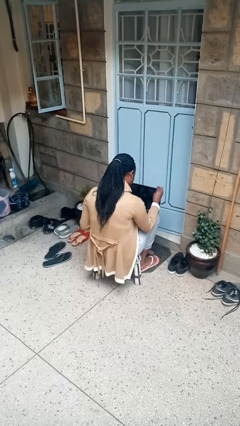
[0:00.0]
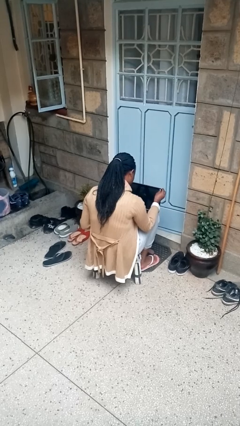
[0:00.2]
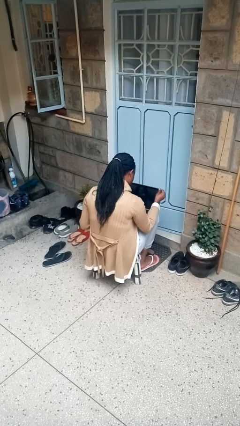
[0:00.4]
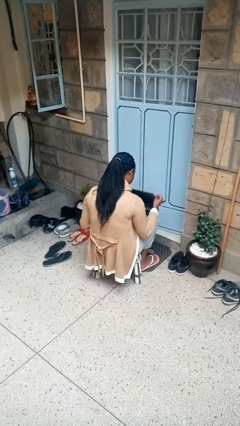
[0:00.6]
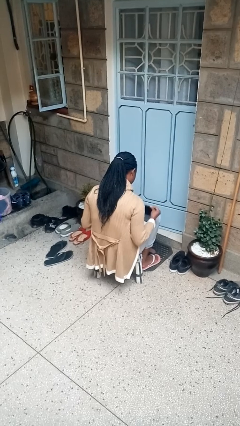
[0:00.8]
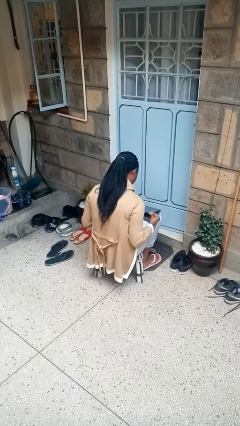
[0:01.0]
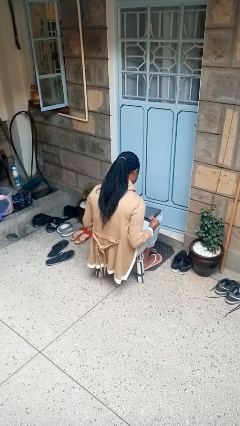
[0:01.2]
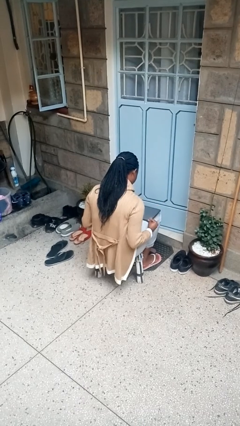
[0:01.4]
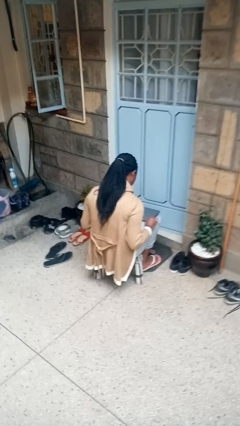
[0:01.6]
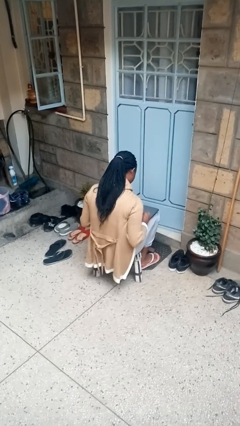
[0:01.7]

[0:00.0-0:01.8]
person closes laptop

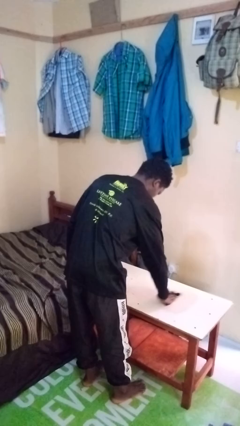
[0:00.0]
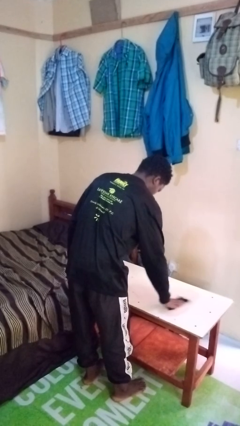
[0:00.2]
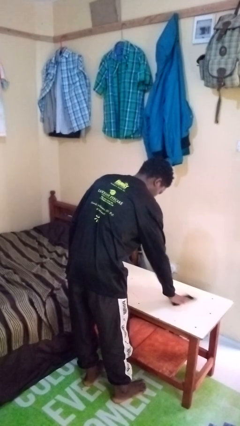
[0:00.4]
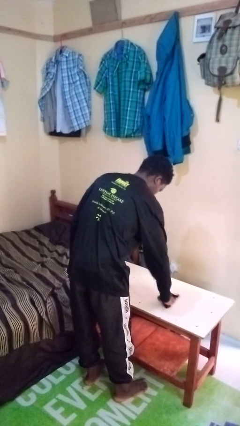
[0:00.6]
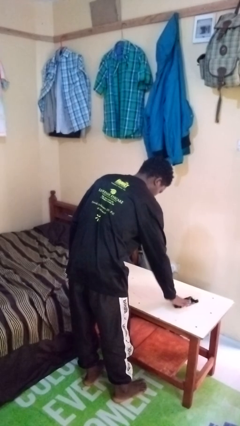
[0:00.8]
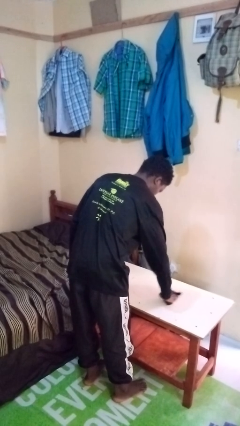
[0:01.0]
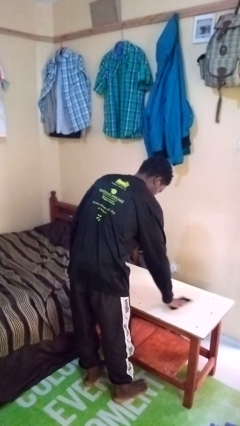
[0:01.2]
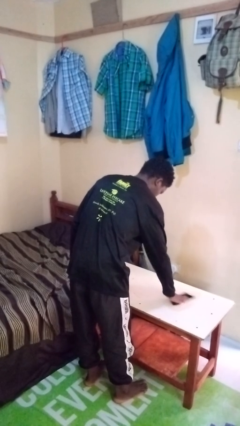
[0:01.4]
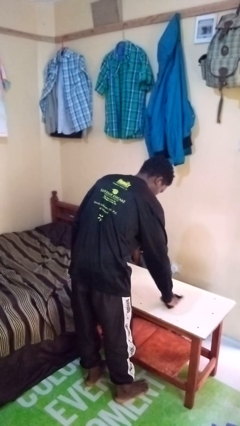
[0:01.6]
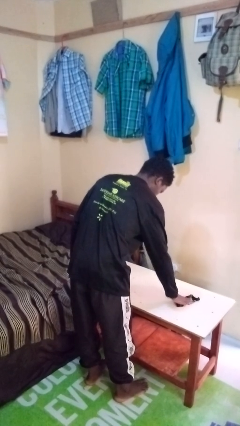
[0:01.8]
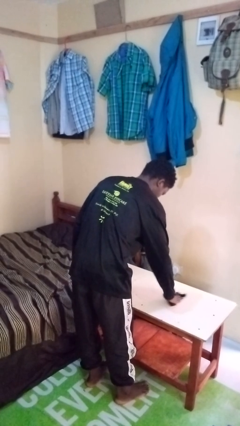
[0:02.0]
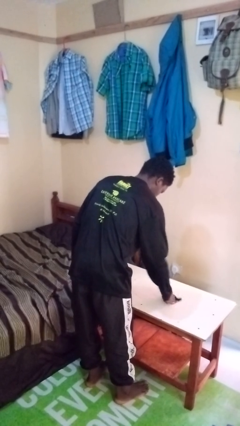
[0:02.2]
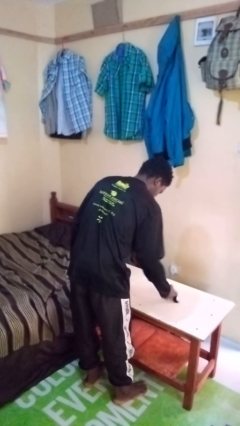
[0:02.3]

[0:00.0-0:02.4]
person cleans table with rag

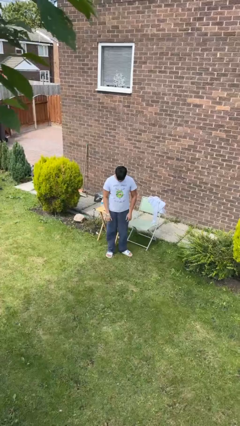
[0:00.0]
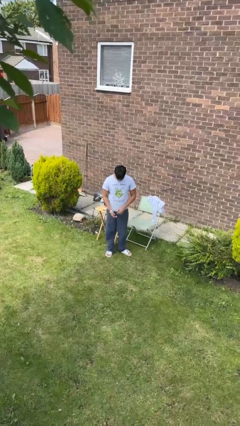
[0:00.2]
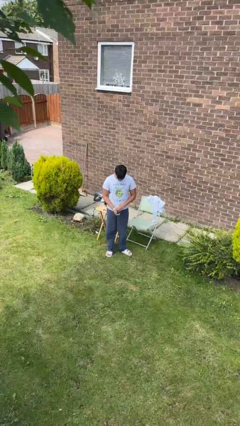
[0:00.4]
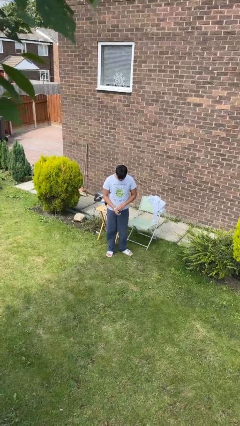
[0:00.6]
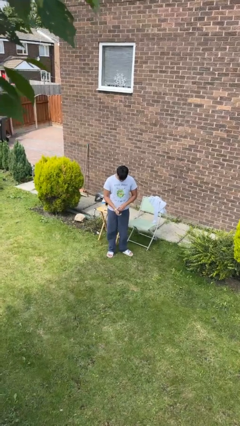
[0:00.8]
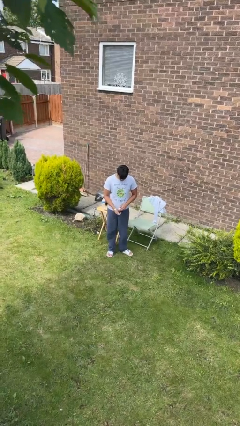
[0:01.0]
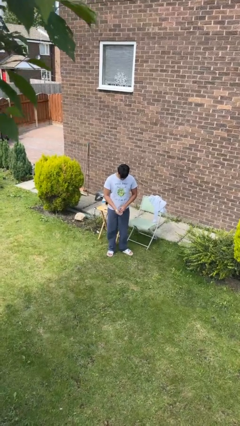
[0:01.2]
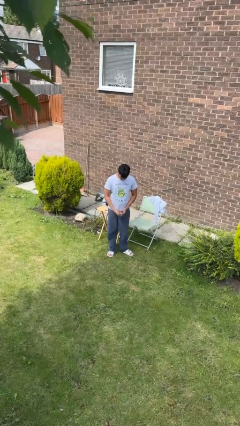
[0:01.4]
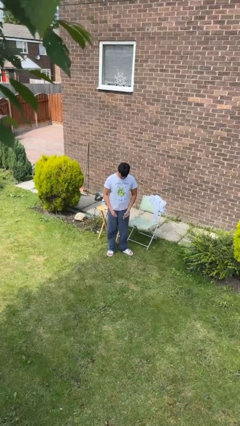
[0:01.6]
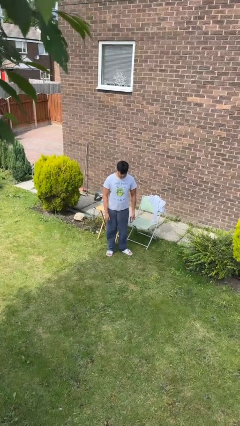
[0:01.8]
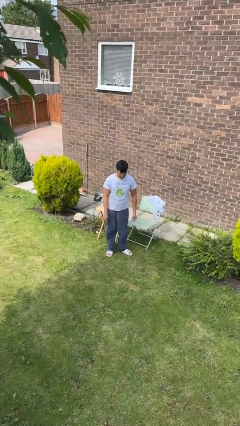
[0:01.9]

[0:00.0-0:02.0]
person takes off wristwatch

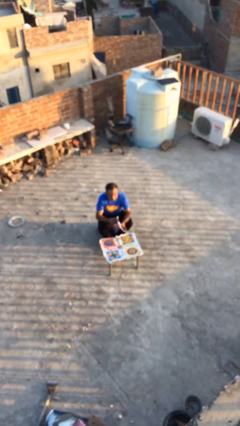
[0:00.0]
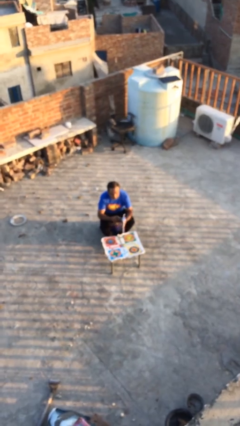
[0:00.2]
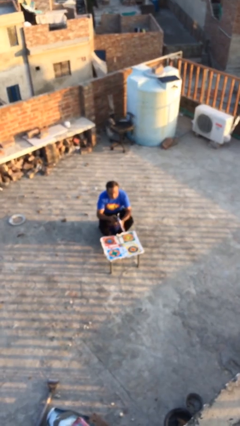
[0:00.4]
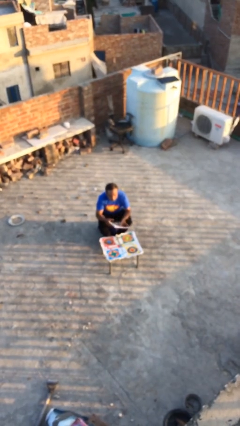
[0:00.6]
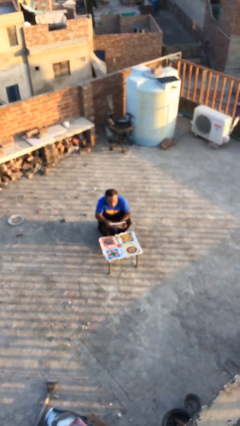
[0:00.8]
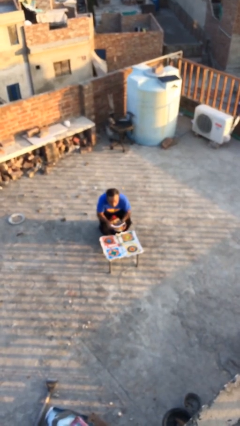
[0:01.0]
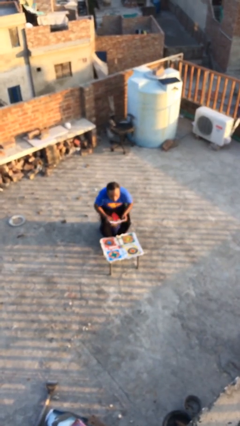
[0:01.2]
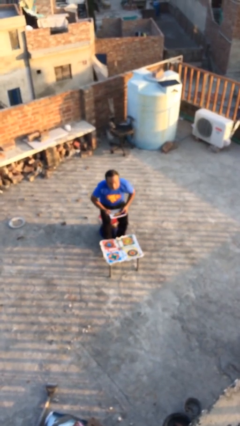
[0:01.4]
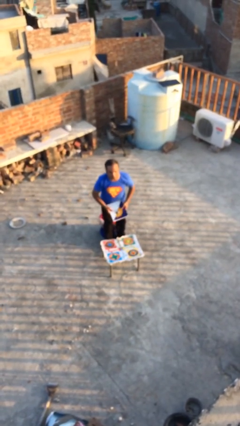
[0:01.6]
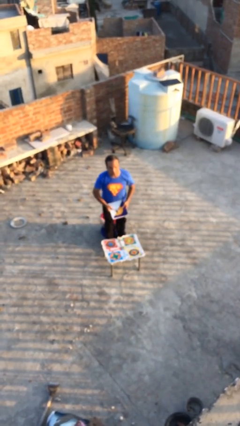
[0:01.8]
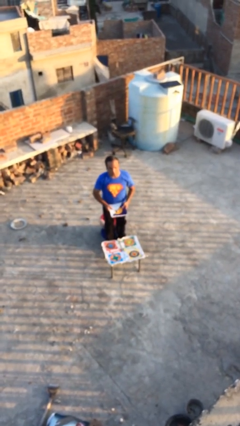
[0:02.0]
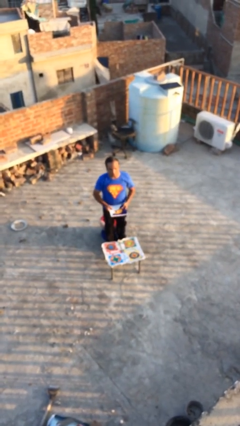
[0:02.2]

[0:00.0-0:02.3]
person stands up

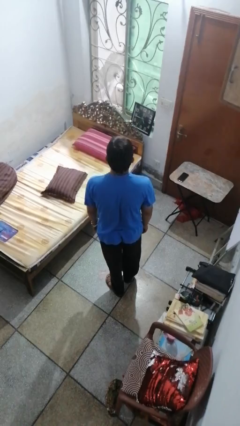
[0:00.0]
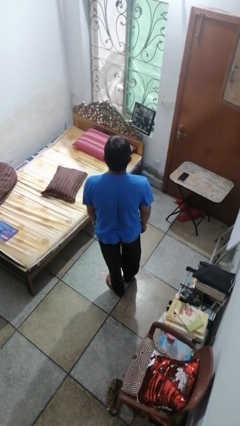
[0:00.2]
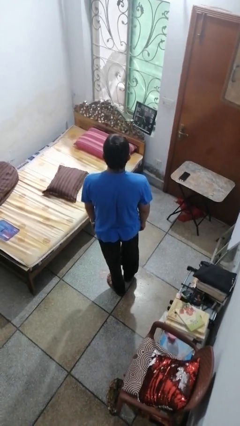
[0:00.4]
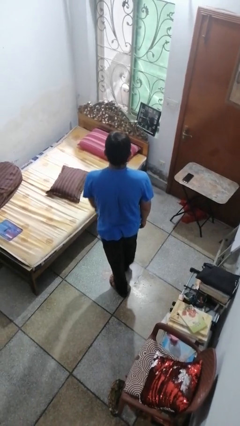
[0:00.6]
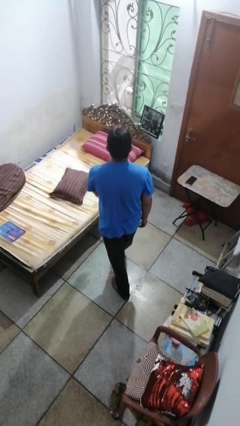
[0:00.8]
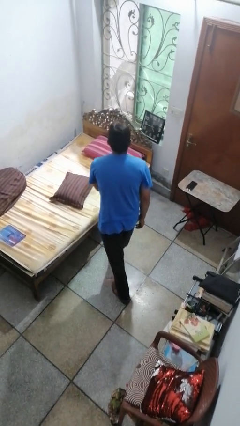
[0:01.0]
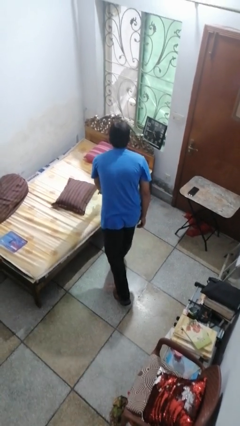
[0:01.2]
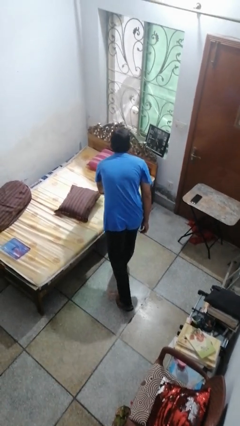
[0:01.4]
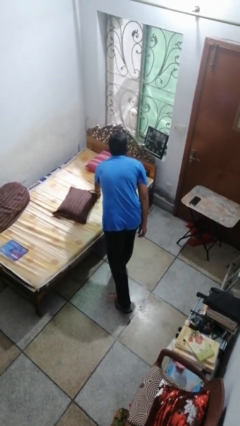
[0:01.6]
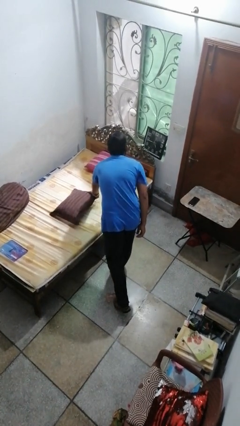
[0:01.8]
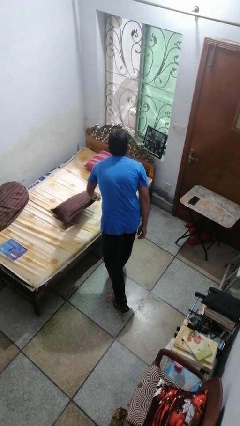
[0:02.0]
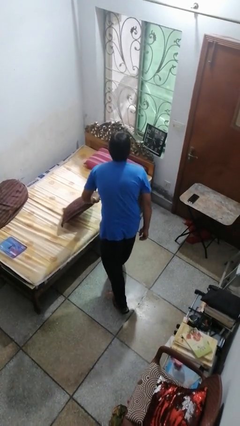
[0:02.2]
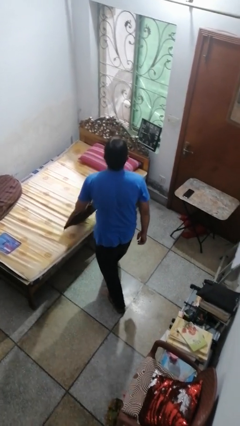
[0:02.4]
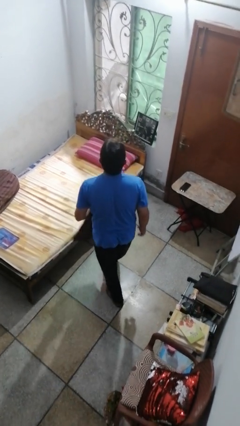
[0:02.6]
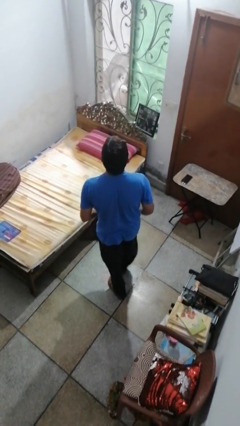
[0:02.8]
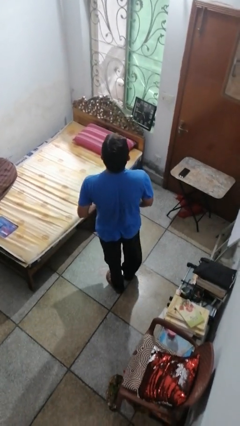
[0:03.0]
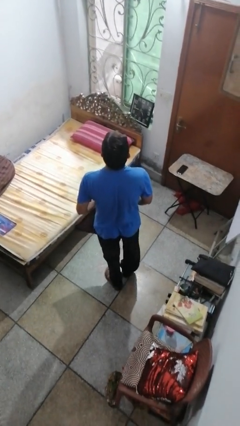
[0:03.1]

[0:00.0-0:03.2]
person picks up object from bed

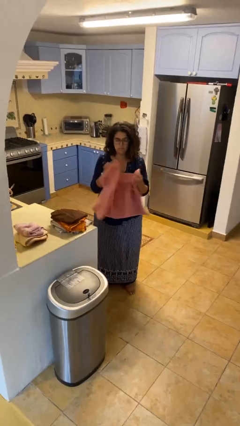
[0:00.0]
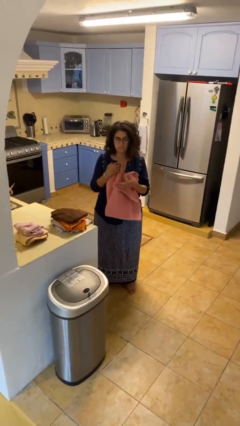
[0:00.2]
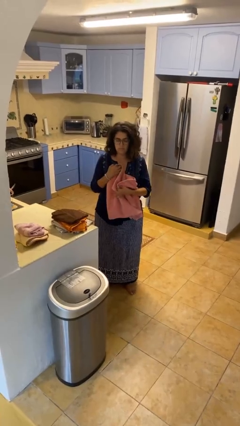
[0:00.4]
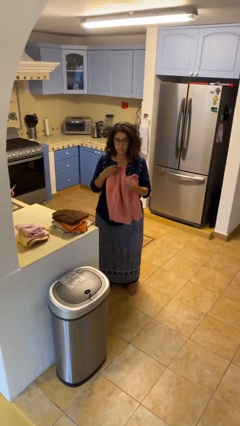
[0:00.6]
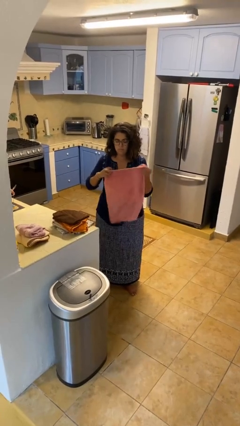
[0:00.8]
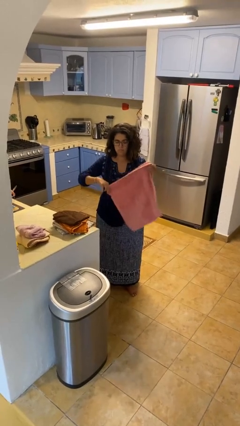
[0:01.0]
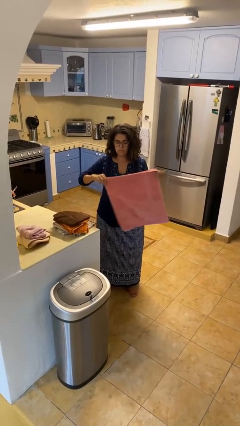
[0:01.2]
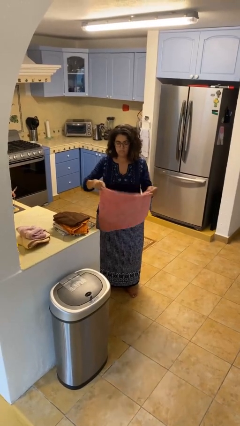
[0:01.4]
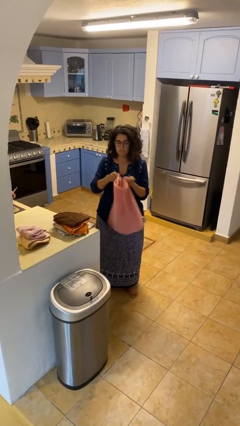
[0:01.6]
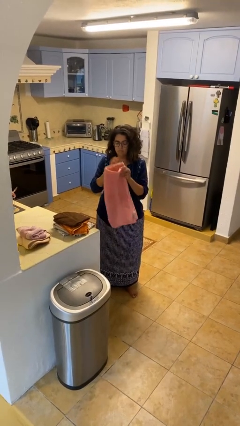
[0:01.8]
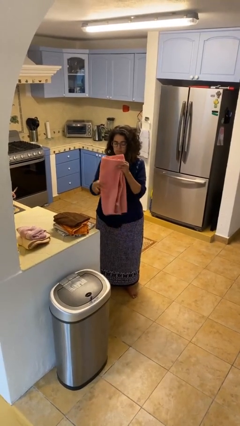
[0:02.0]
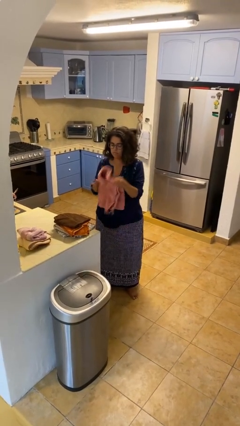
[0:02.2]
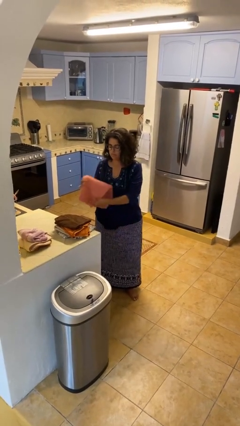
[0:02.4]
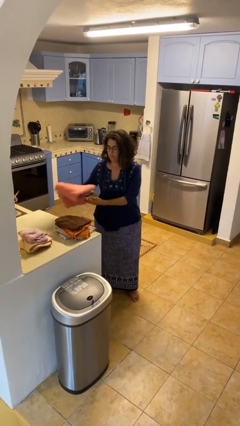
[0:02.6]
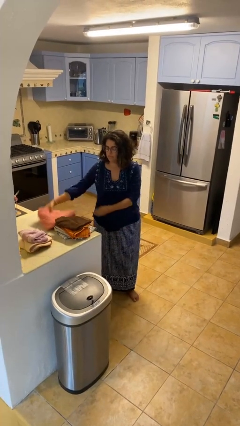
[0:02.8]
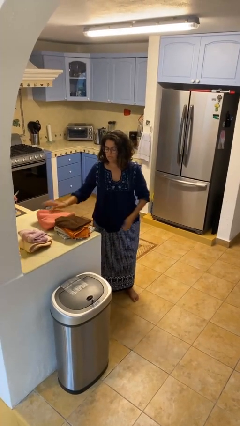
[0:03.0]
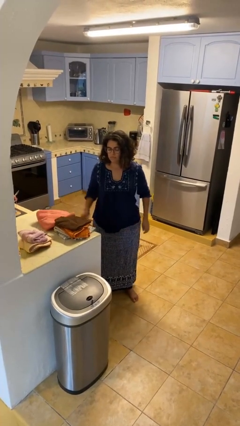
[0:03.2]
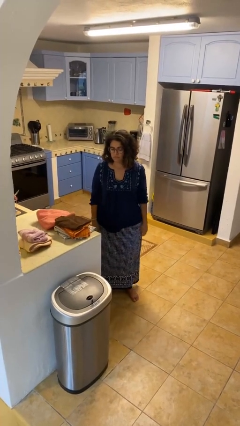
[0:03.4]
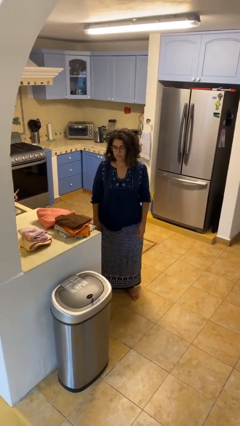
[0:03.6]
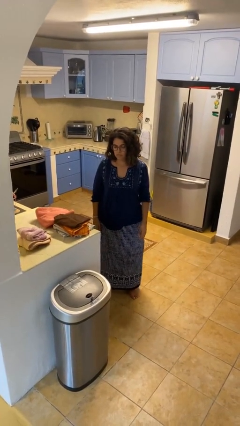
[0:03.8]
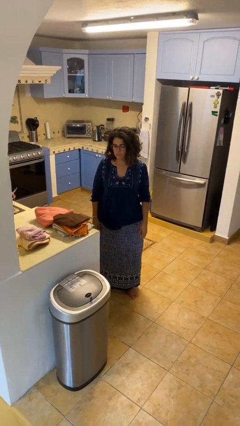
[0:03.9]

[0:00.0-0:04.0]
person folds towel

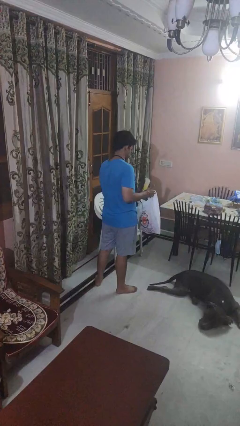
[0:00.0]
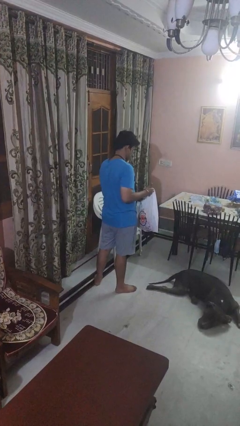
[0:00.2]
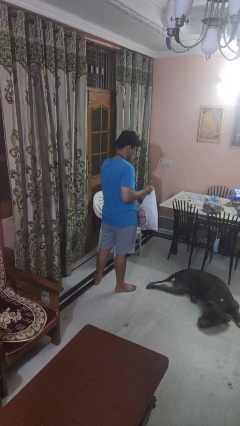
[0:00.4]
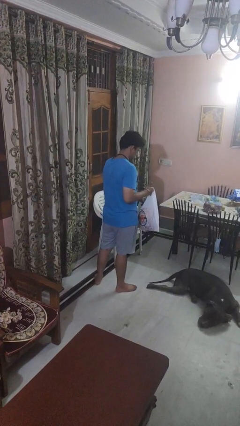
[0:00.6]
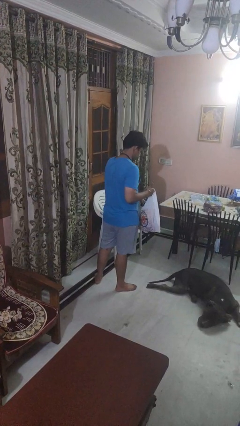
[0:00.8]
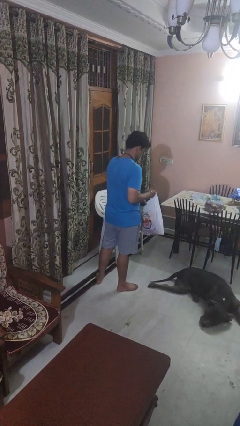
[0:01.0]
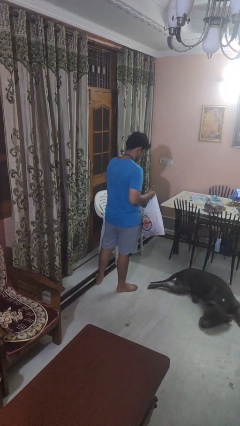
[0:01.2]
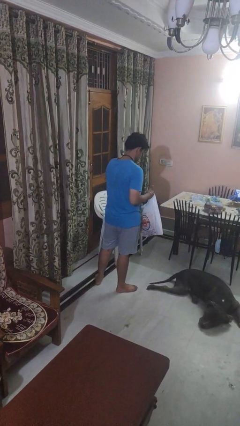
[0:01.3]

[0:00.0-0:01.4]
person puts object into bag
